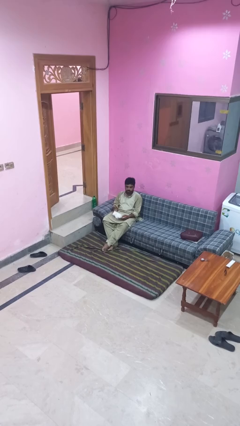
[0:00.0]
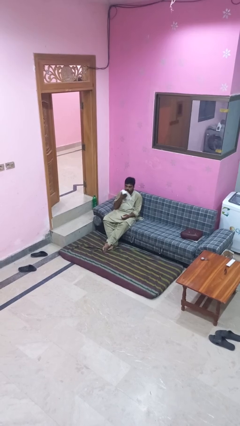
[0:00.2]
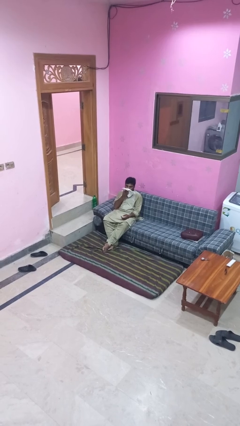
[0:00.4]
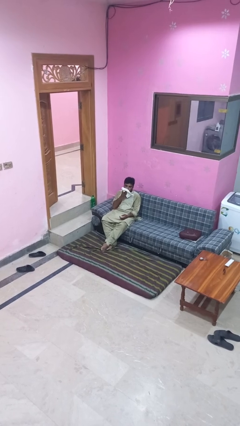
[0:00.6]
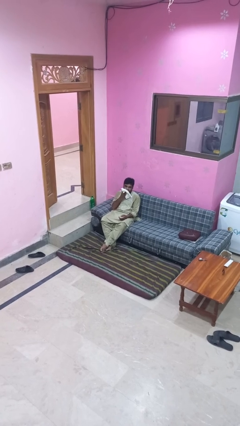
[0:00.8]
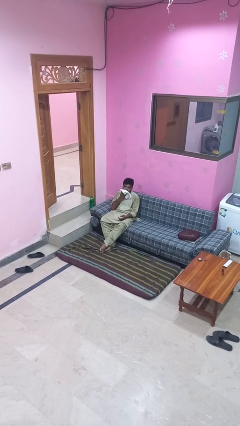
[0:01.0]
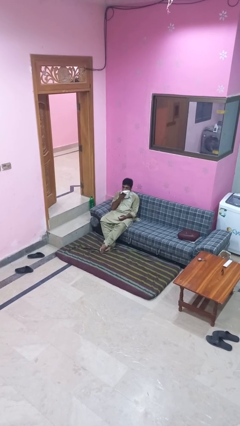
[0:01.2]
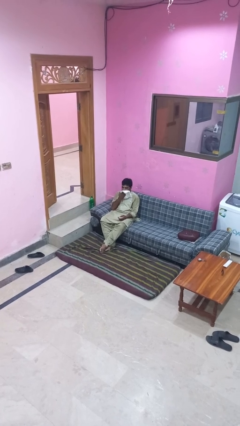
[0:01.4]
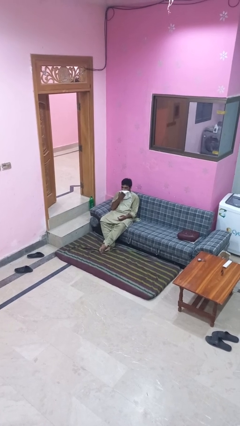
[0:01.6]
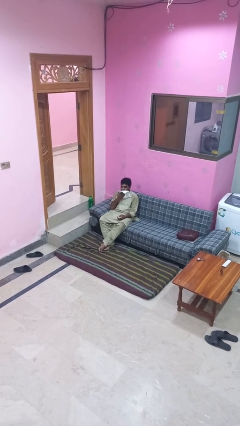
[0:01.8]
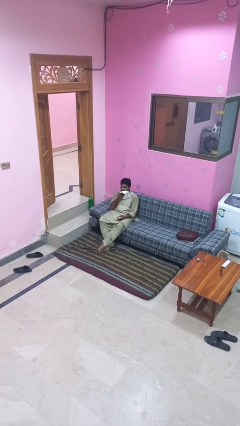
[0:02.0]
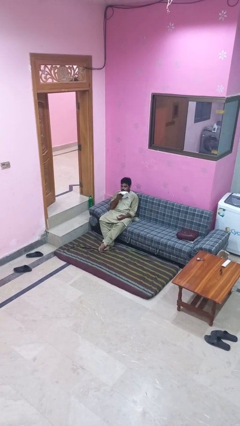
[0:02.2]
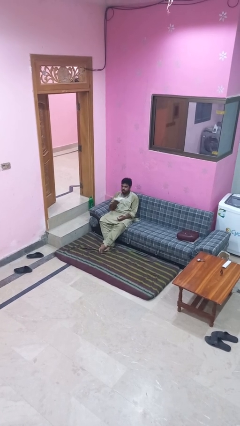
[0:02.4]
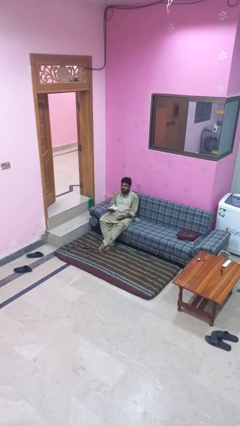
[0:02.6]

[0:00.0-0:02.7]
person wipes mouth with napkin

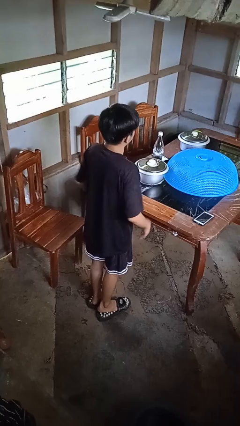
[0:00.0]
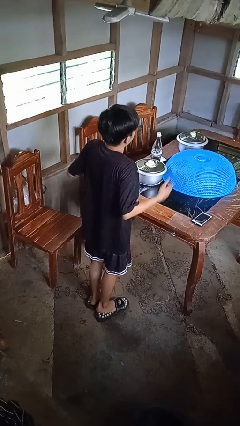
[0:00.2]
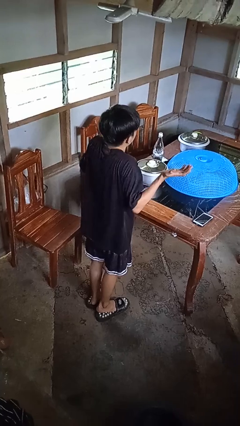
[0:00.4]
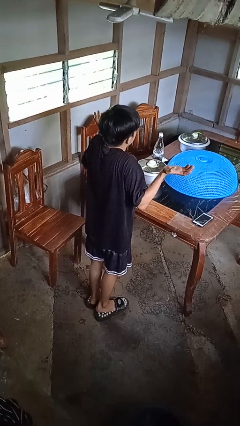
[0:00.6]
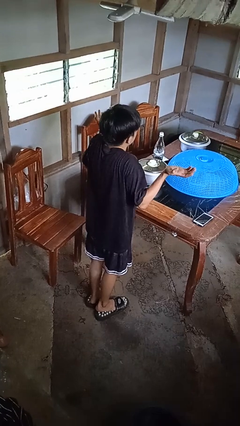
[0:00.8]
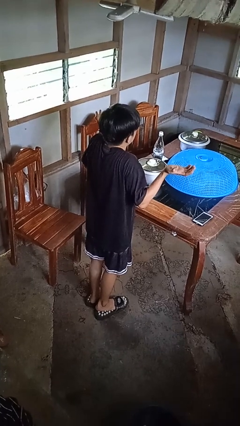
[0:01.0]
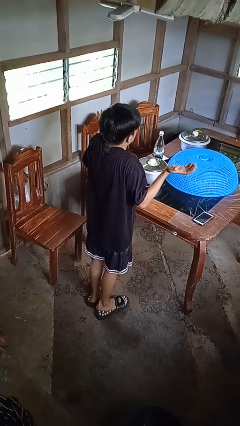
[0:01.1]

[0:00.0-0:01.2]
person shrugs

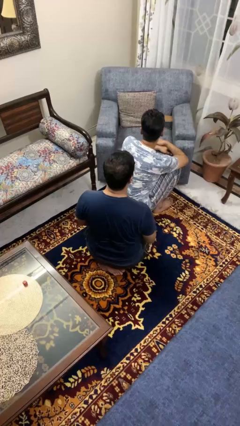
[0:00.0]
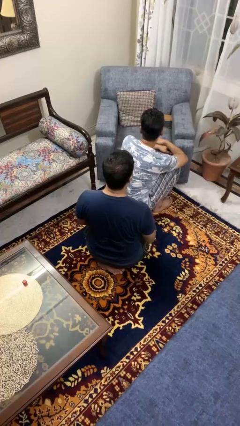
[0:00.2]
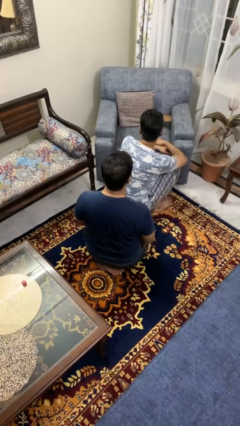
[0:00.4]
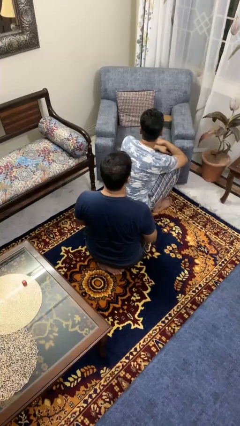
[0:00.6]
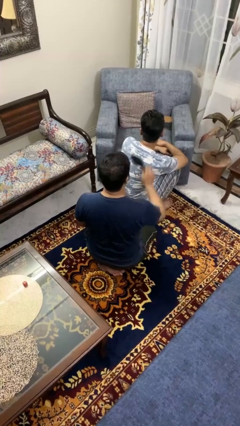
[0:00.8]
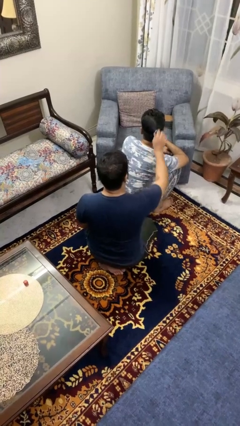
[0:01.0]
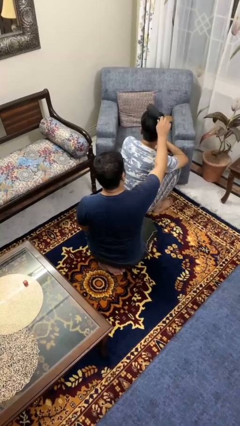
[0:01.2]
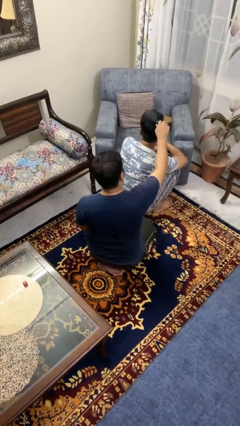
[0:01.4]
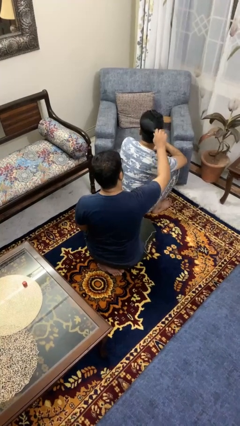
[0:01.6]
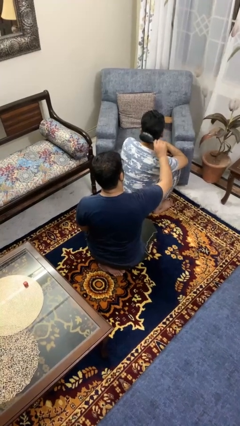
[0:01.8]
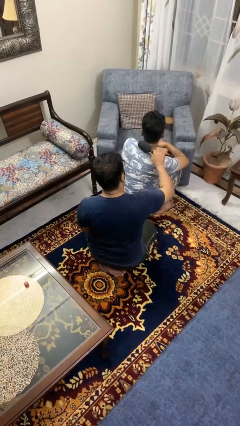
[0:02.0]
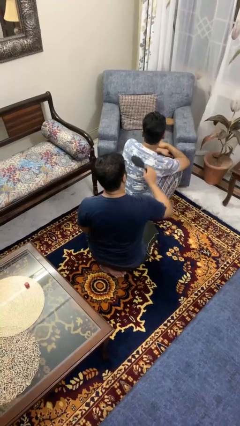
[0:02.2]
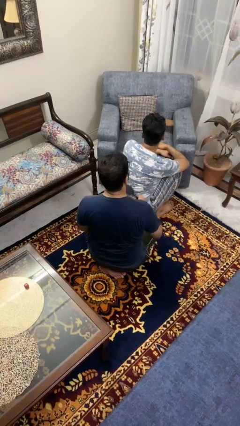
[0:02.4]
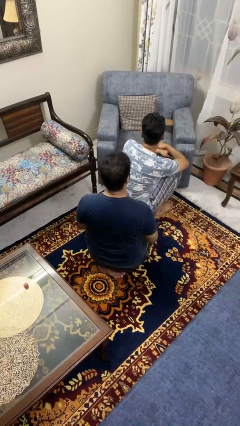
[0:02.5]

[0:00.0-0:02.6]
person brushes hair of person

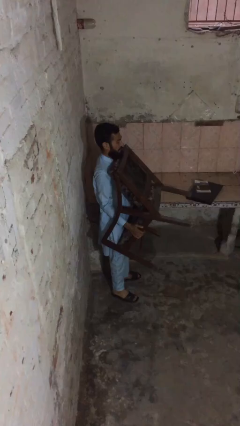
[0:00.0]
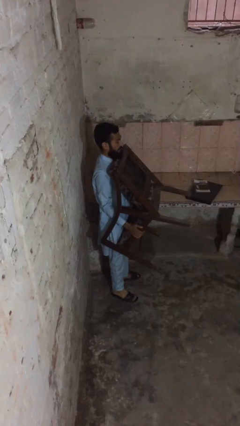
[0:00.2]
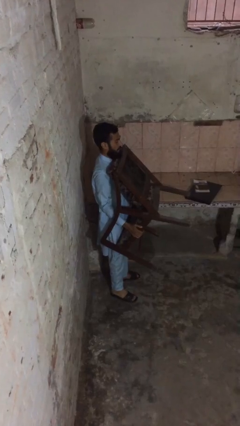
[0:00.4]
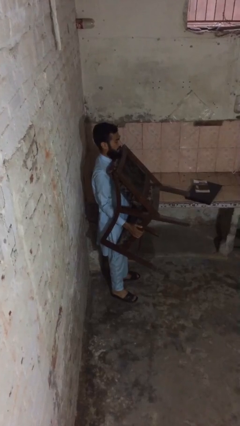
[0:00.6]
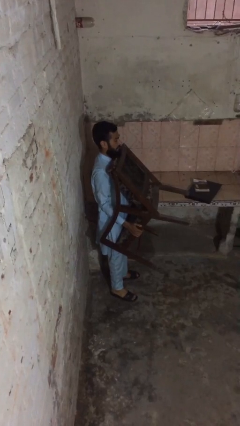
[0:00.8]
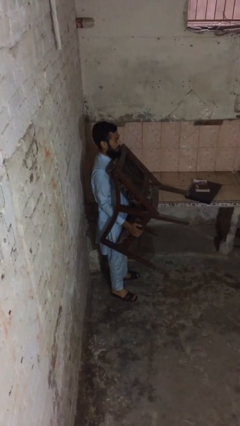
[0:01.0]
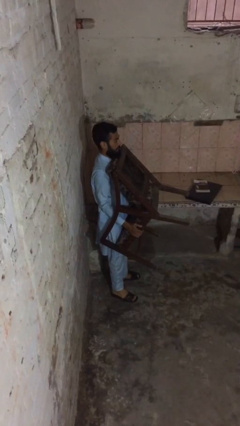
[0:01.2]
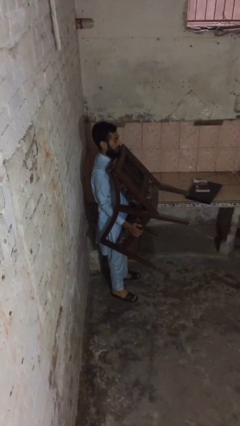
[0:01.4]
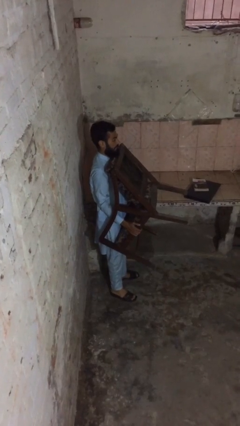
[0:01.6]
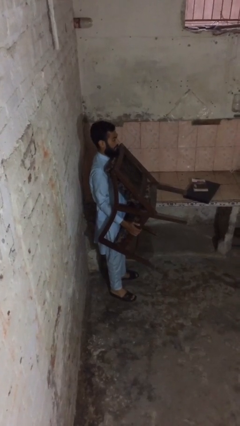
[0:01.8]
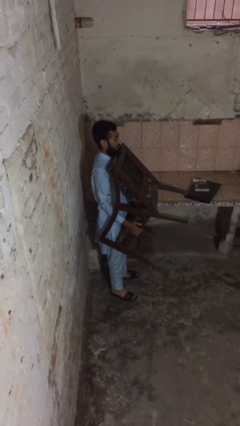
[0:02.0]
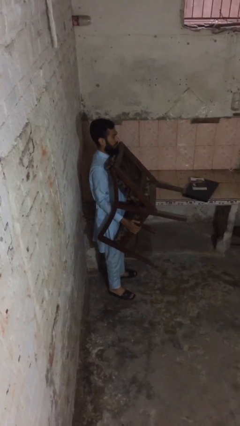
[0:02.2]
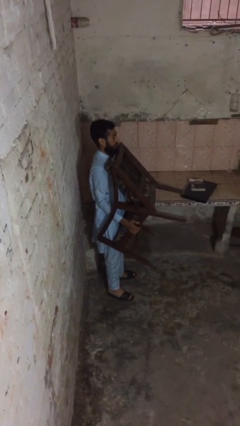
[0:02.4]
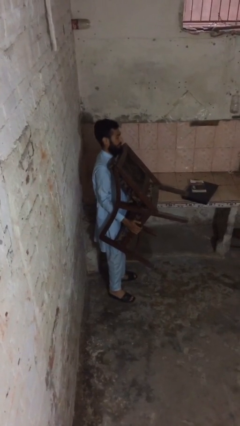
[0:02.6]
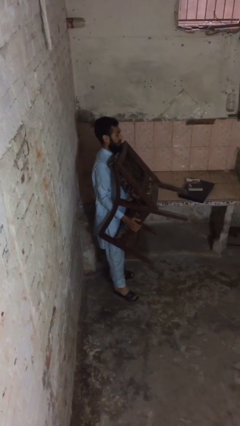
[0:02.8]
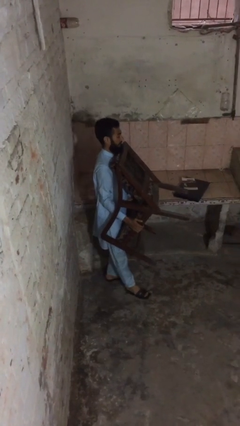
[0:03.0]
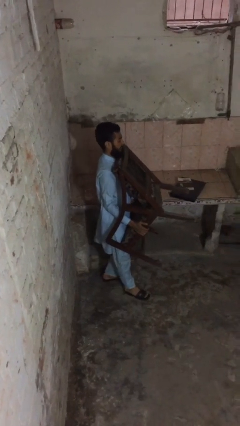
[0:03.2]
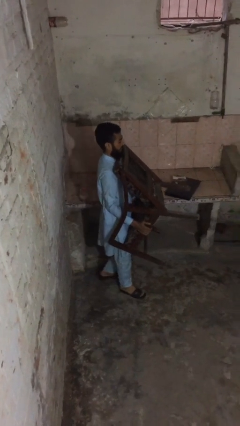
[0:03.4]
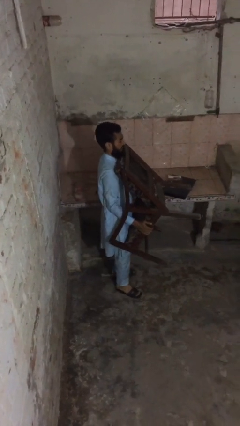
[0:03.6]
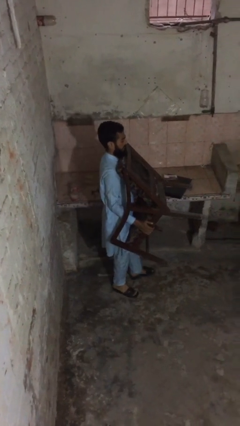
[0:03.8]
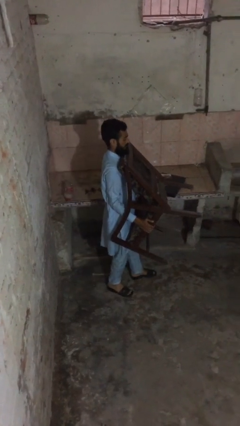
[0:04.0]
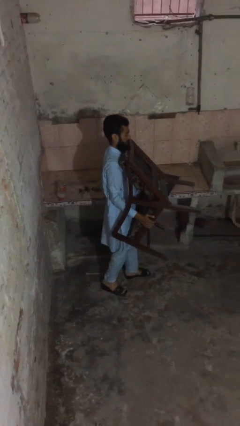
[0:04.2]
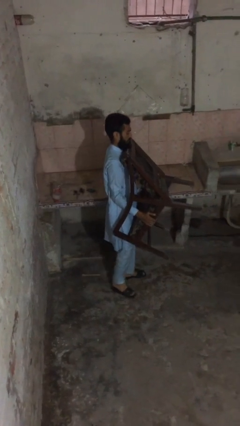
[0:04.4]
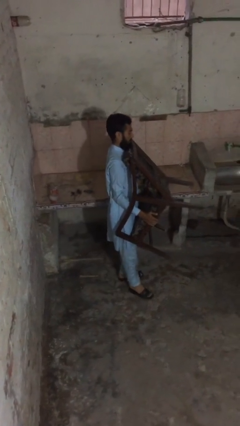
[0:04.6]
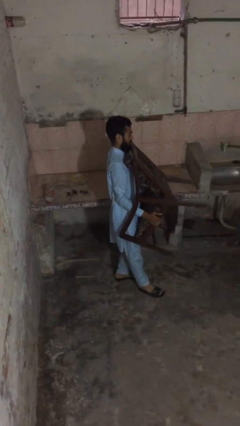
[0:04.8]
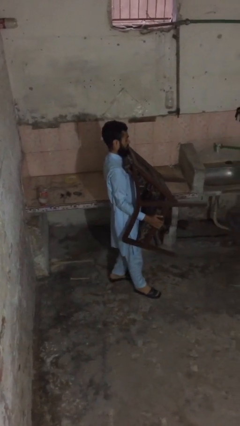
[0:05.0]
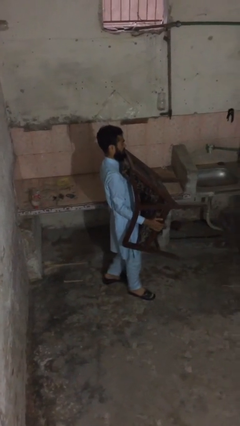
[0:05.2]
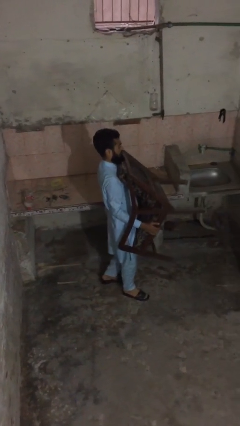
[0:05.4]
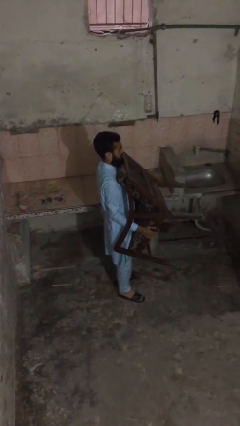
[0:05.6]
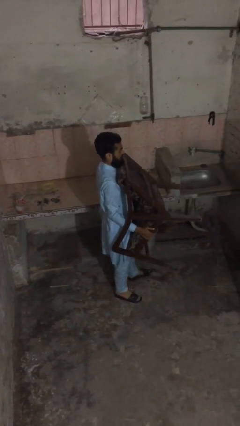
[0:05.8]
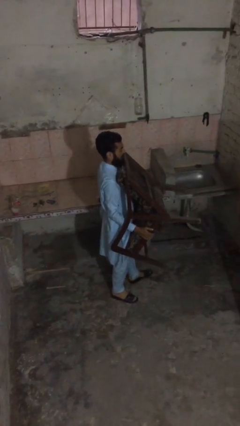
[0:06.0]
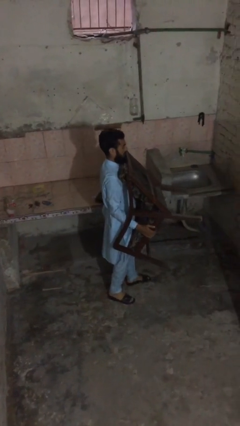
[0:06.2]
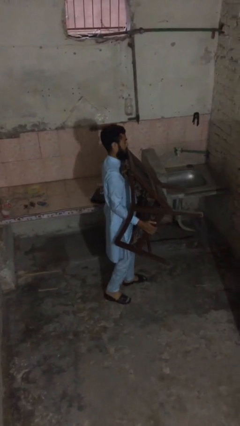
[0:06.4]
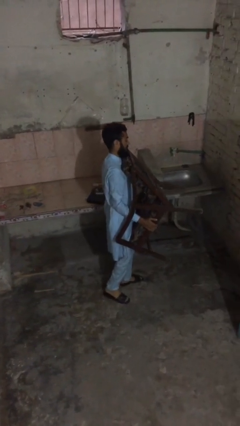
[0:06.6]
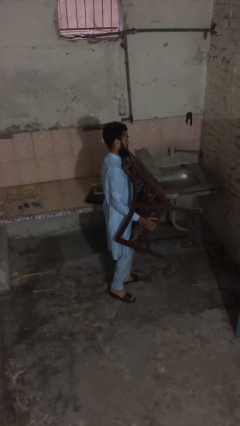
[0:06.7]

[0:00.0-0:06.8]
person carries heavy object

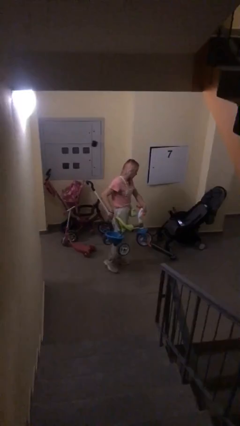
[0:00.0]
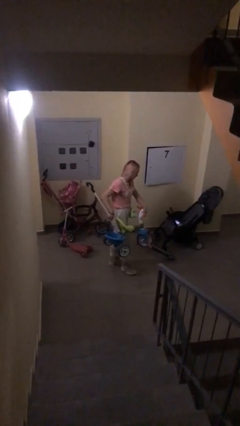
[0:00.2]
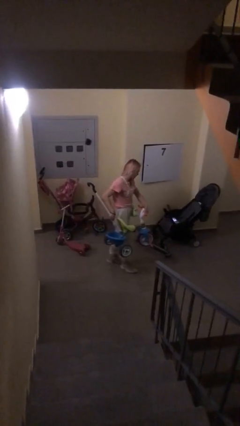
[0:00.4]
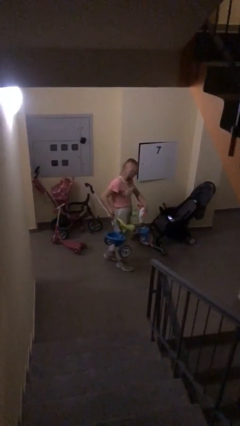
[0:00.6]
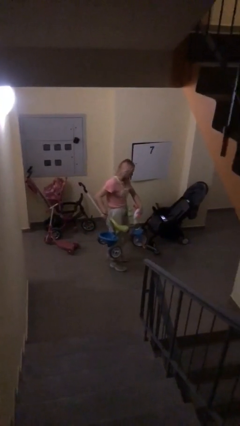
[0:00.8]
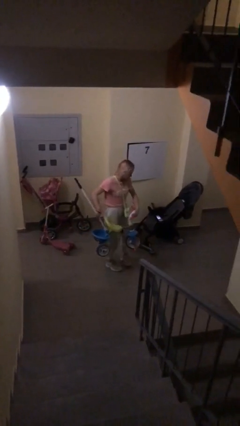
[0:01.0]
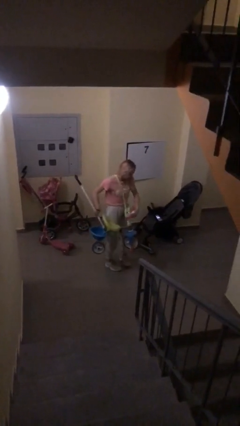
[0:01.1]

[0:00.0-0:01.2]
person carries bicycle

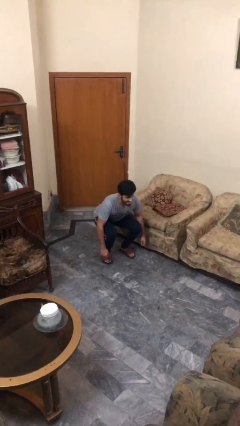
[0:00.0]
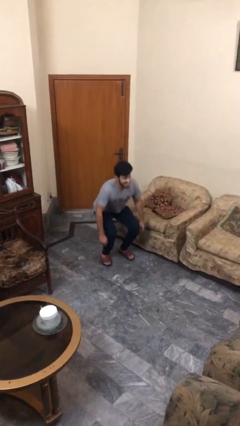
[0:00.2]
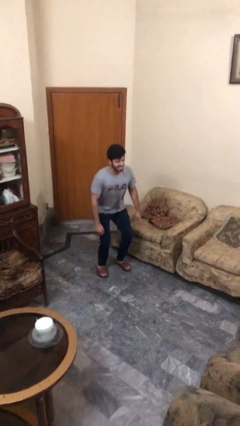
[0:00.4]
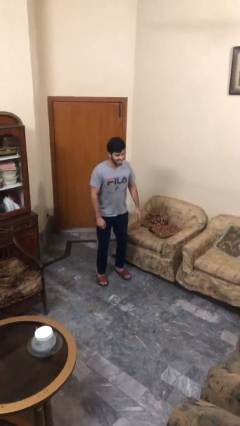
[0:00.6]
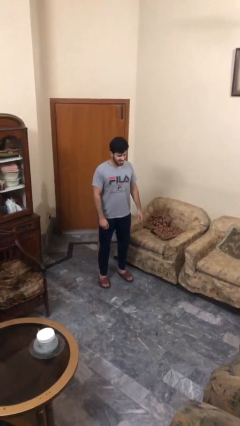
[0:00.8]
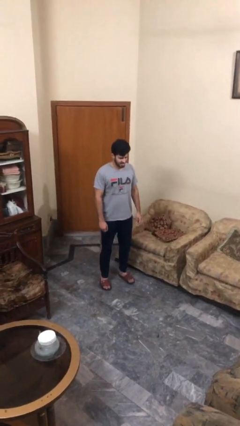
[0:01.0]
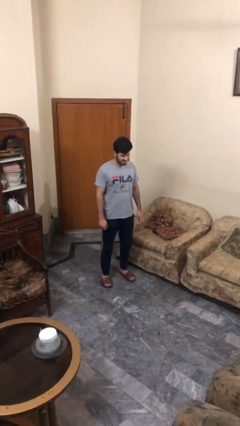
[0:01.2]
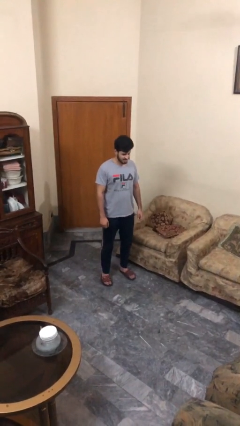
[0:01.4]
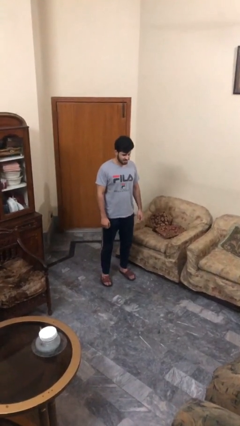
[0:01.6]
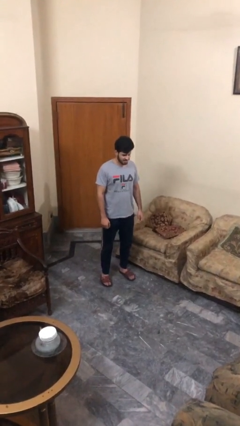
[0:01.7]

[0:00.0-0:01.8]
person stands up

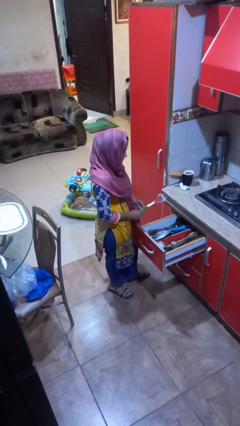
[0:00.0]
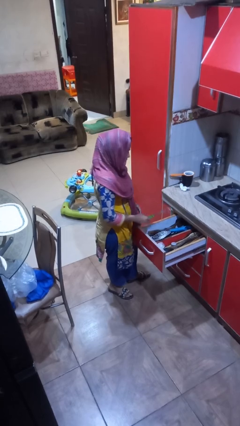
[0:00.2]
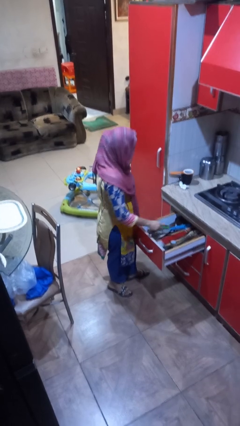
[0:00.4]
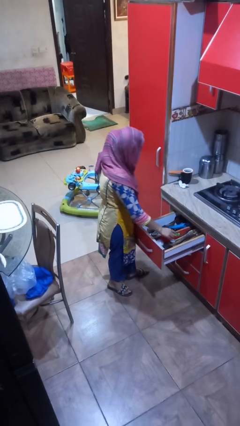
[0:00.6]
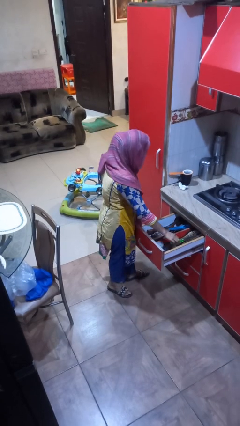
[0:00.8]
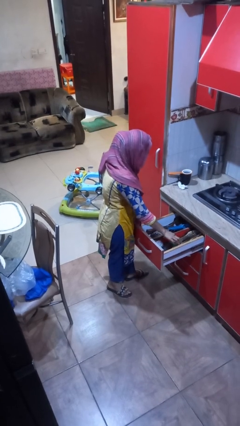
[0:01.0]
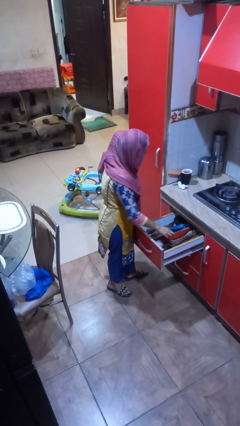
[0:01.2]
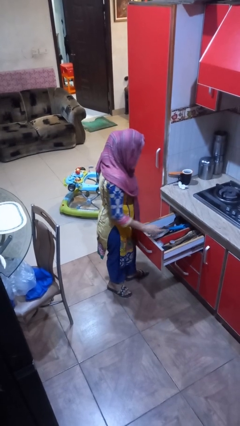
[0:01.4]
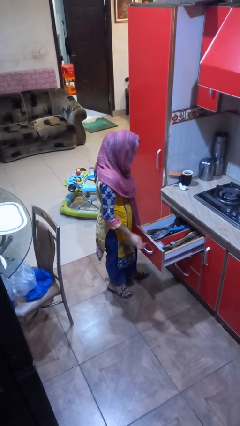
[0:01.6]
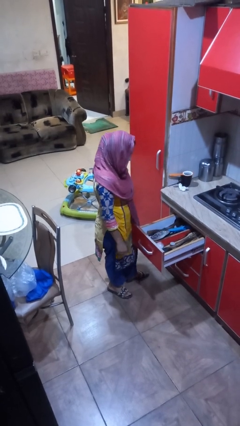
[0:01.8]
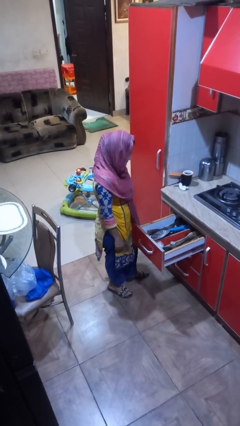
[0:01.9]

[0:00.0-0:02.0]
person puts object into kitchen drawer
